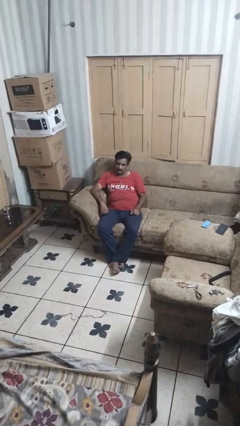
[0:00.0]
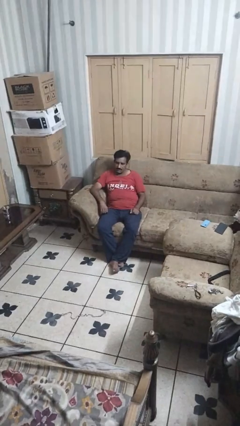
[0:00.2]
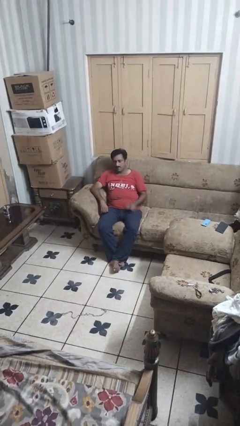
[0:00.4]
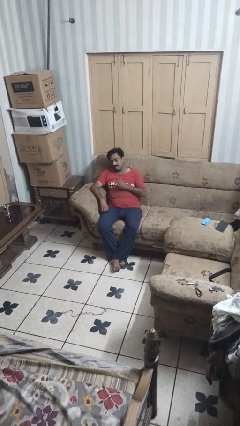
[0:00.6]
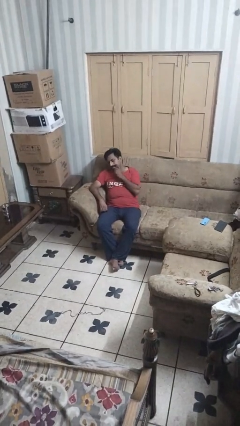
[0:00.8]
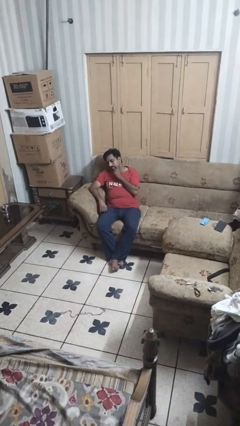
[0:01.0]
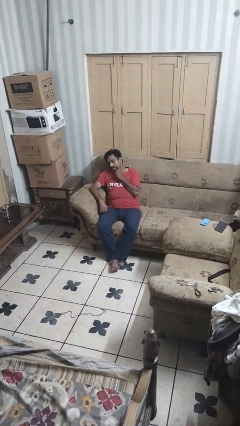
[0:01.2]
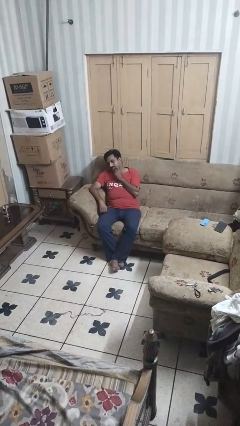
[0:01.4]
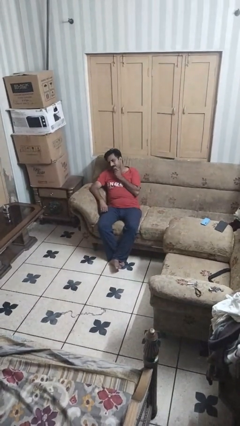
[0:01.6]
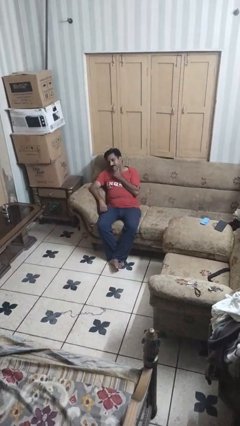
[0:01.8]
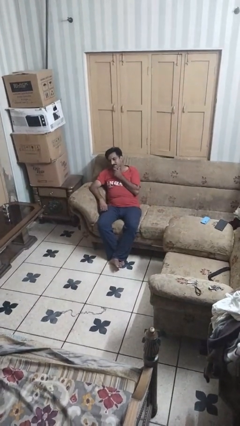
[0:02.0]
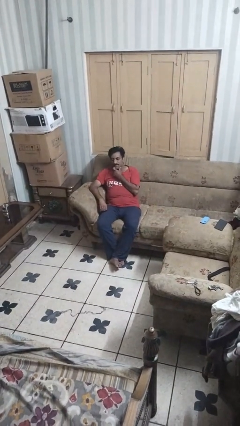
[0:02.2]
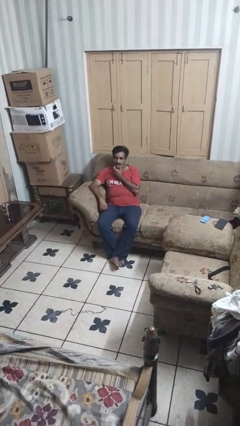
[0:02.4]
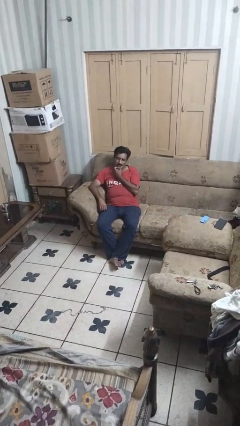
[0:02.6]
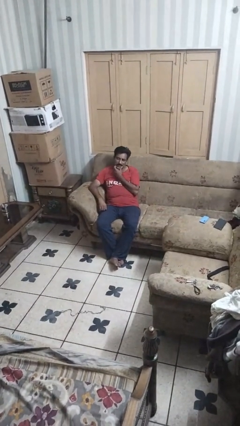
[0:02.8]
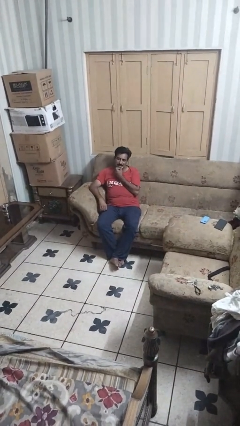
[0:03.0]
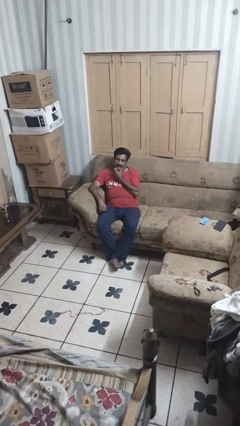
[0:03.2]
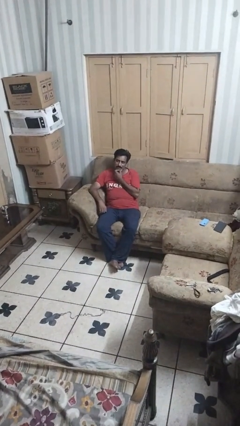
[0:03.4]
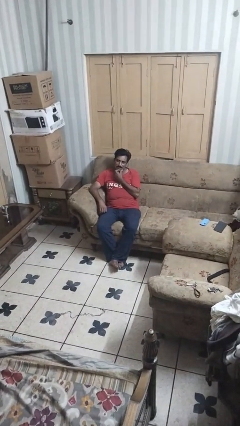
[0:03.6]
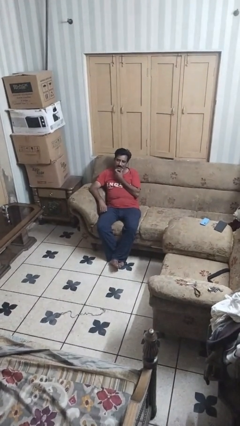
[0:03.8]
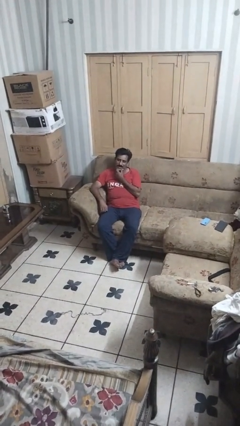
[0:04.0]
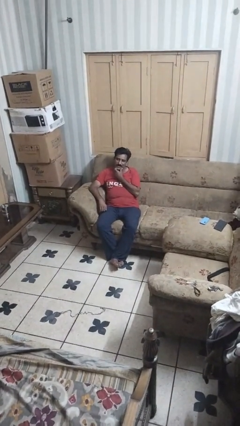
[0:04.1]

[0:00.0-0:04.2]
person strokes chin

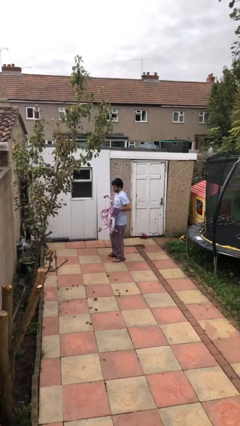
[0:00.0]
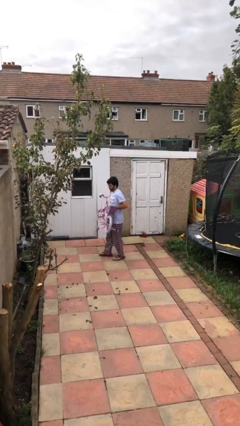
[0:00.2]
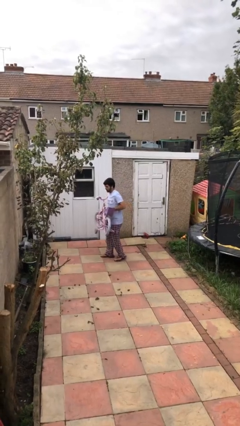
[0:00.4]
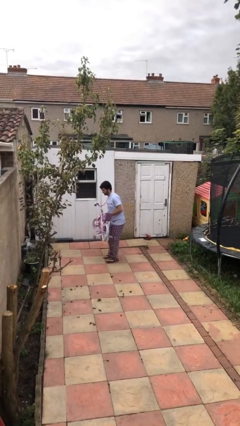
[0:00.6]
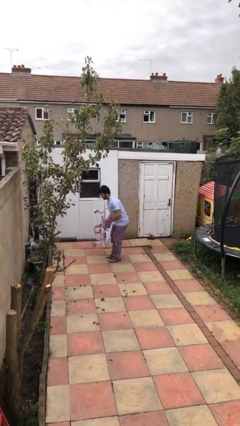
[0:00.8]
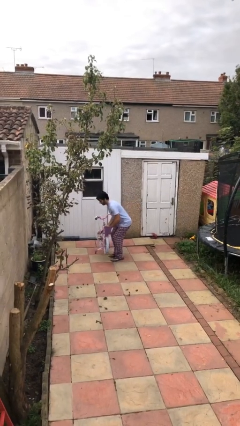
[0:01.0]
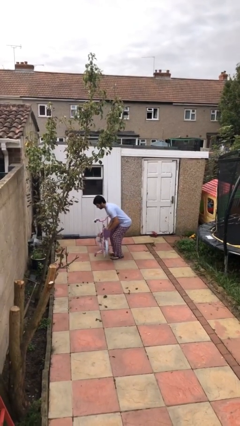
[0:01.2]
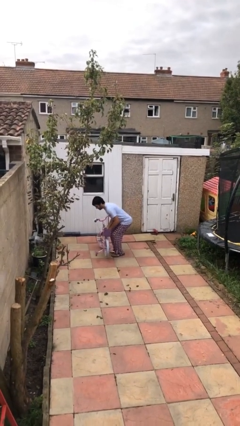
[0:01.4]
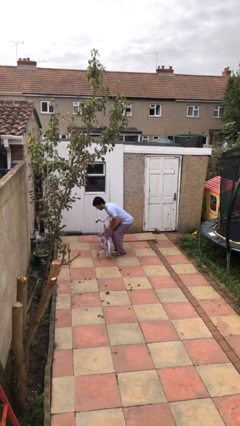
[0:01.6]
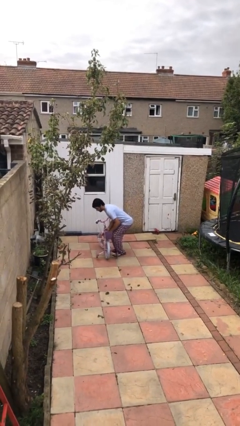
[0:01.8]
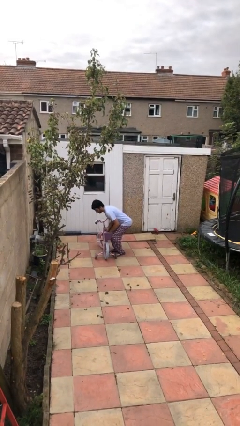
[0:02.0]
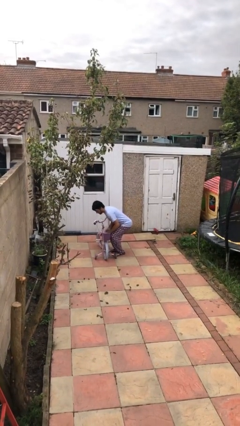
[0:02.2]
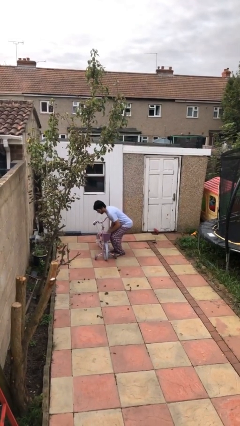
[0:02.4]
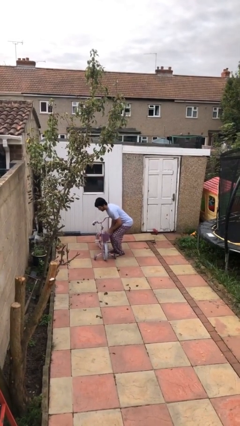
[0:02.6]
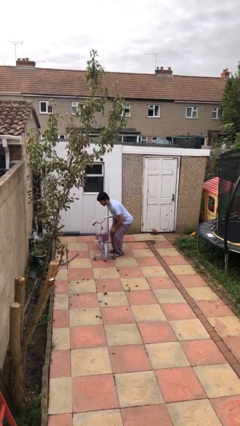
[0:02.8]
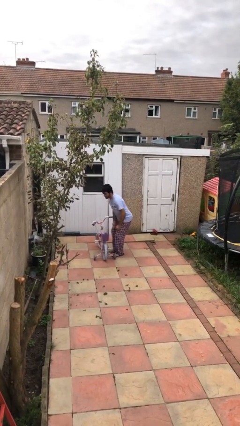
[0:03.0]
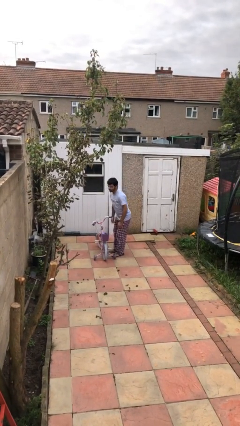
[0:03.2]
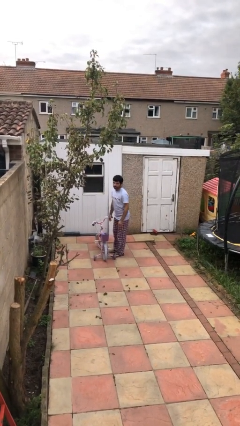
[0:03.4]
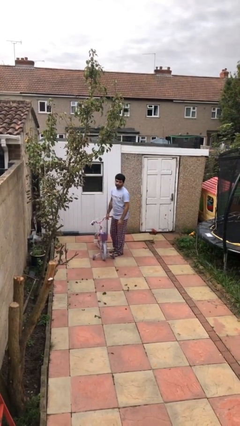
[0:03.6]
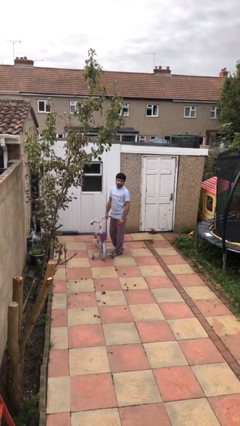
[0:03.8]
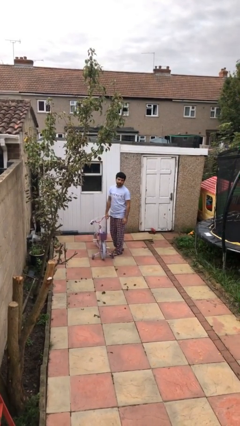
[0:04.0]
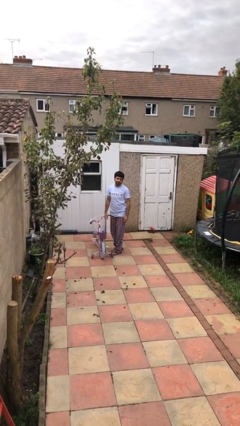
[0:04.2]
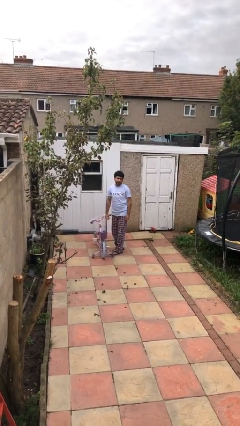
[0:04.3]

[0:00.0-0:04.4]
person puts down object on floor

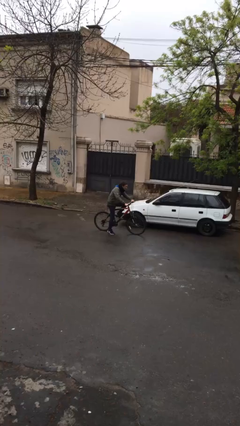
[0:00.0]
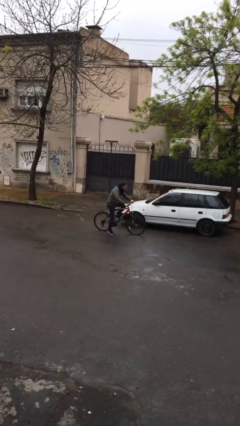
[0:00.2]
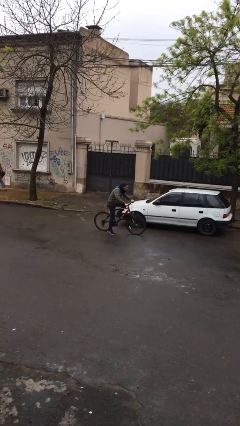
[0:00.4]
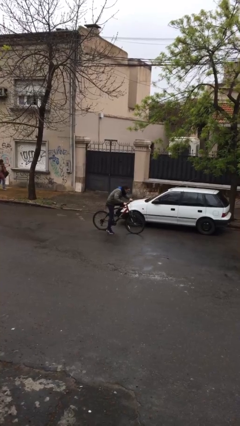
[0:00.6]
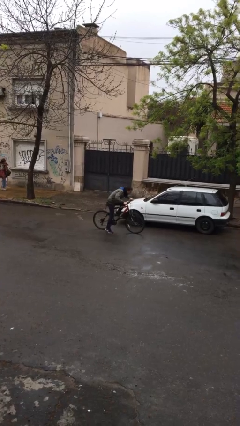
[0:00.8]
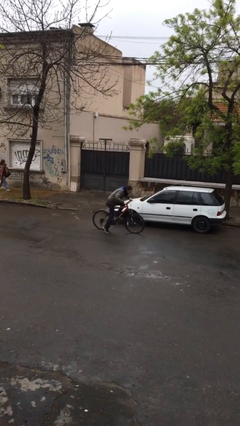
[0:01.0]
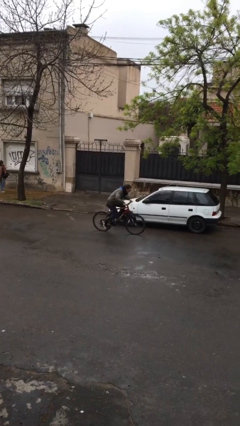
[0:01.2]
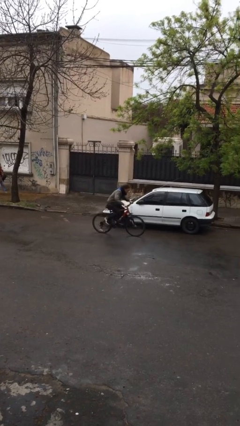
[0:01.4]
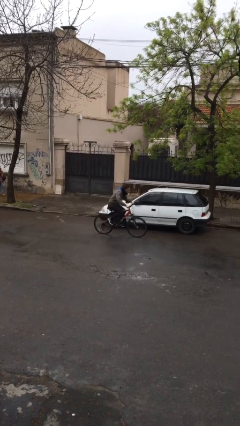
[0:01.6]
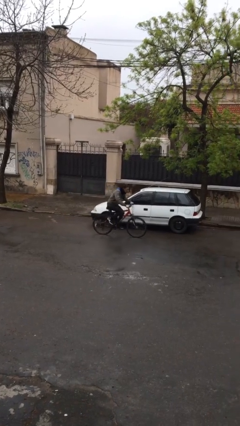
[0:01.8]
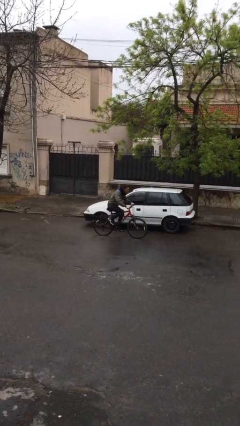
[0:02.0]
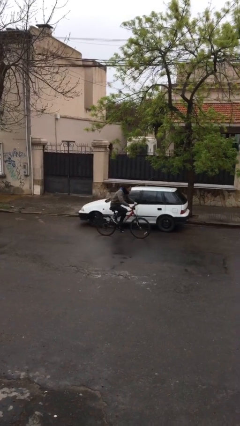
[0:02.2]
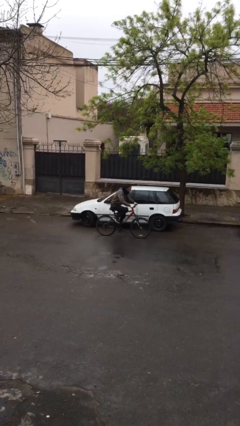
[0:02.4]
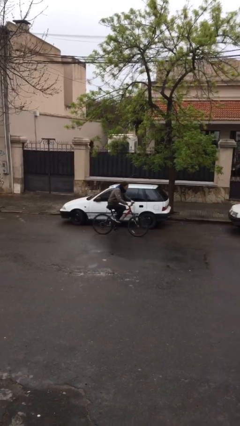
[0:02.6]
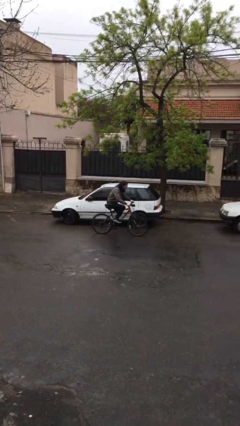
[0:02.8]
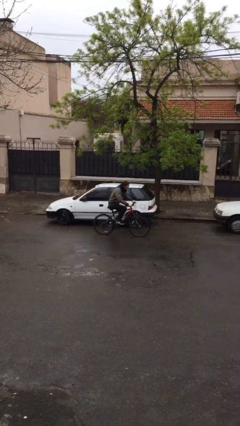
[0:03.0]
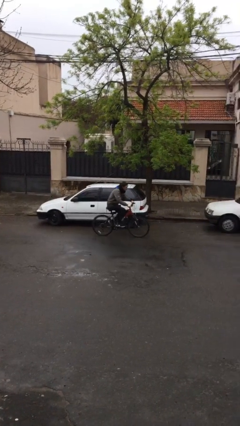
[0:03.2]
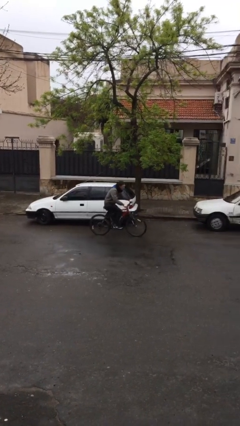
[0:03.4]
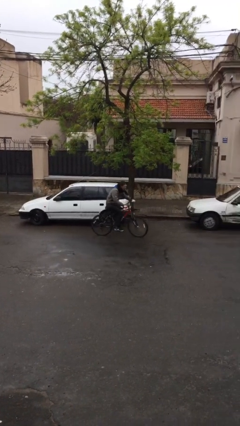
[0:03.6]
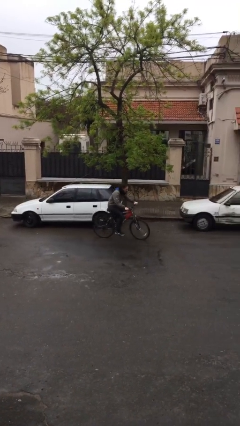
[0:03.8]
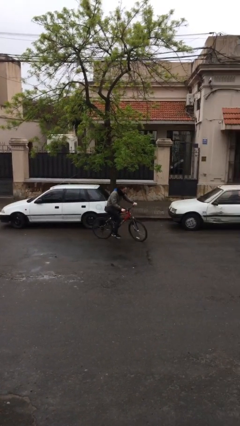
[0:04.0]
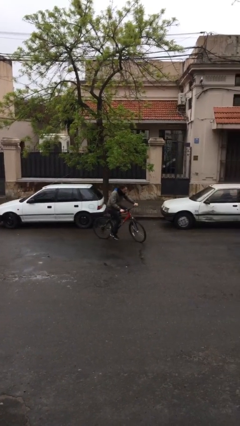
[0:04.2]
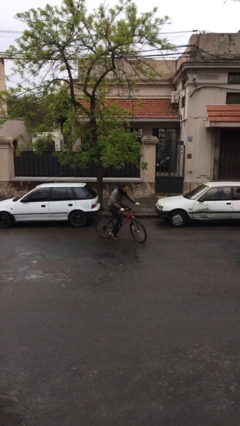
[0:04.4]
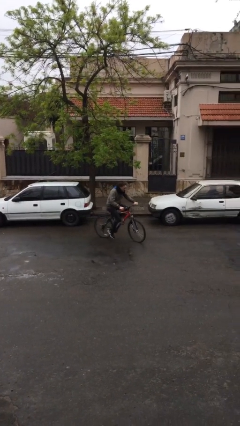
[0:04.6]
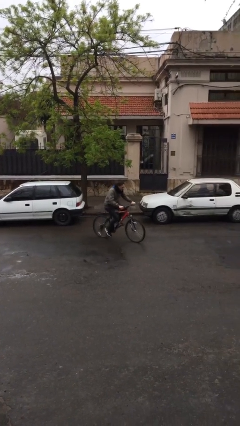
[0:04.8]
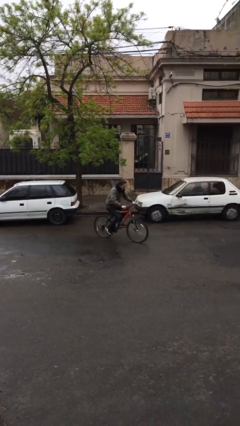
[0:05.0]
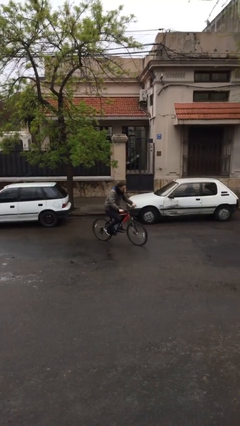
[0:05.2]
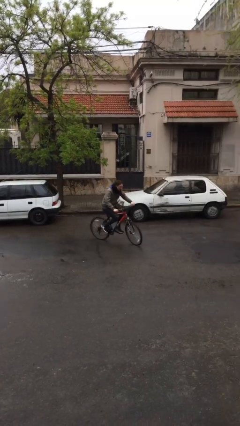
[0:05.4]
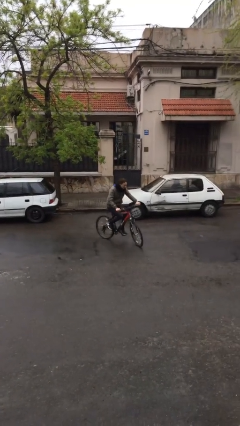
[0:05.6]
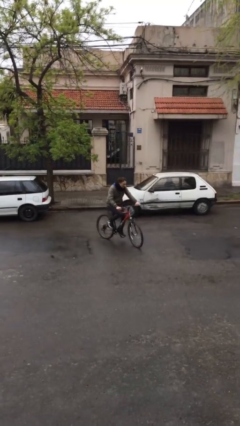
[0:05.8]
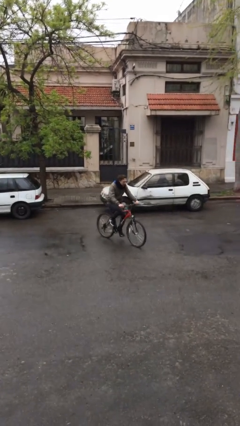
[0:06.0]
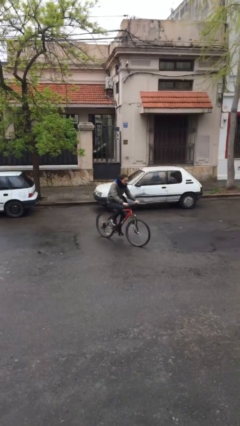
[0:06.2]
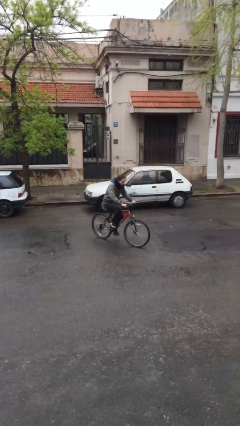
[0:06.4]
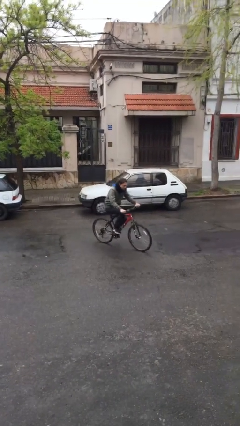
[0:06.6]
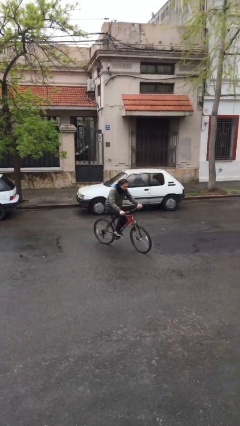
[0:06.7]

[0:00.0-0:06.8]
person rides bicycle

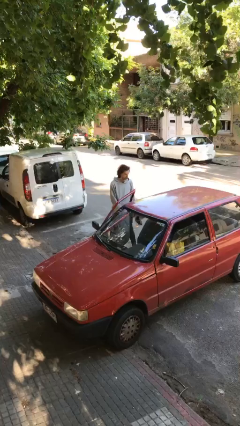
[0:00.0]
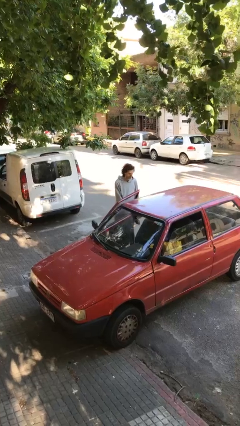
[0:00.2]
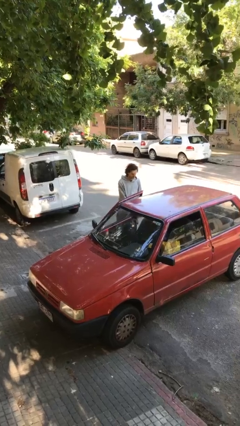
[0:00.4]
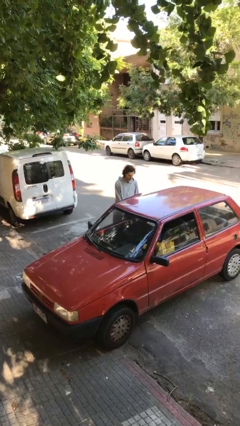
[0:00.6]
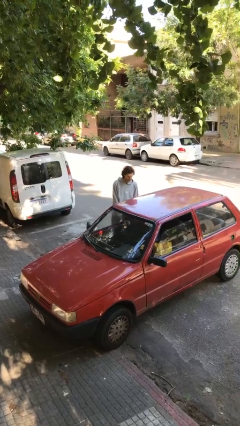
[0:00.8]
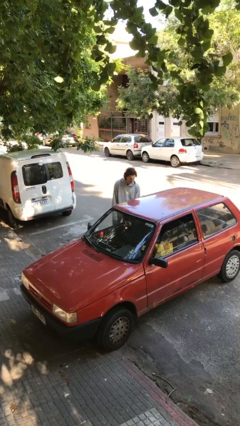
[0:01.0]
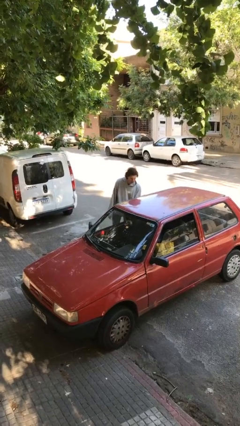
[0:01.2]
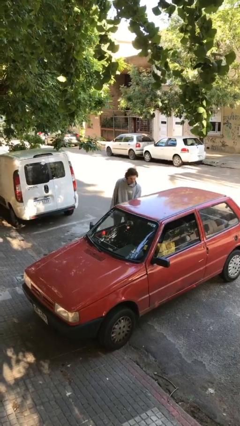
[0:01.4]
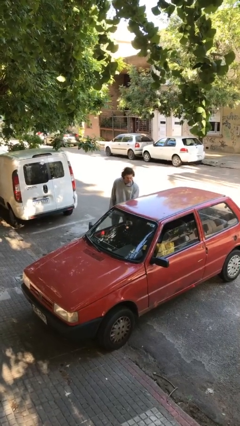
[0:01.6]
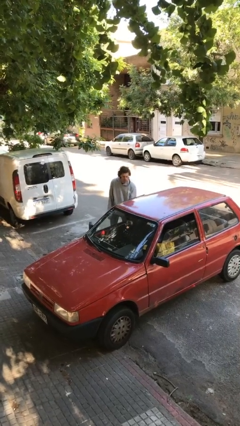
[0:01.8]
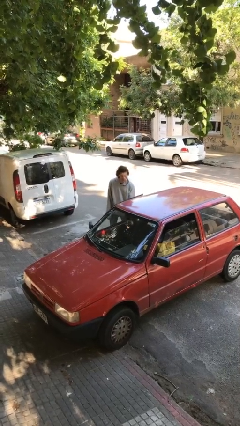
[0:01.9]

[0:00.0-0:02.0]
person closes car door
